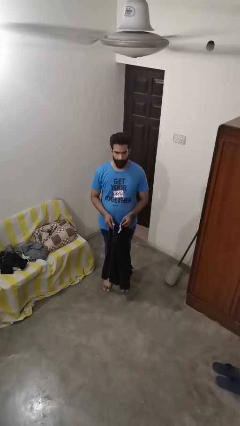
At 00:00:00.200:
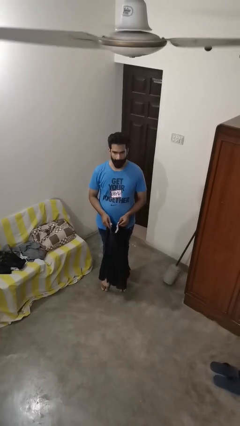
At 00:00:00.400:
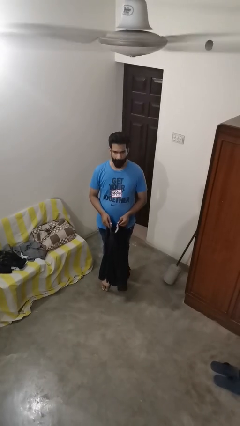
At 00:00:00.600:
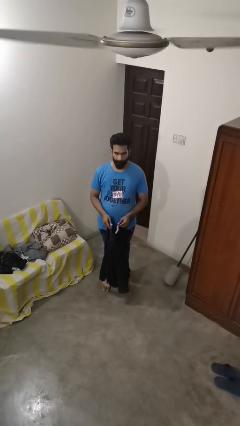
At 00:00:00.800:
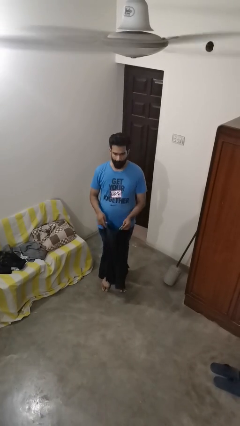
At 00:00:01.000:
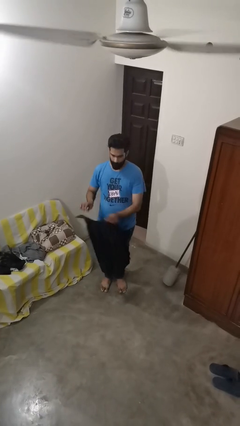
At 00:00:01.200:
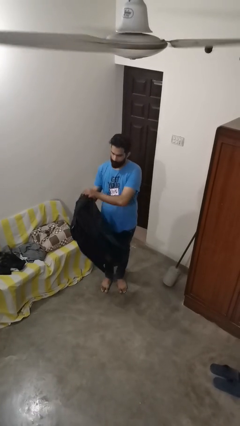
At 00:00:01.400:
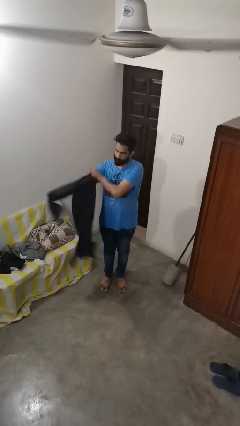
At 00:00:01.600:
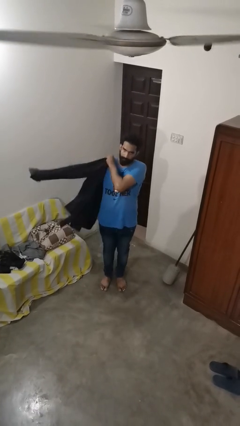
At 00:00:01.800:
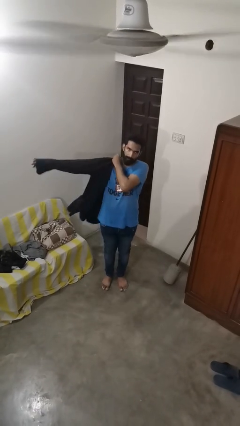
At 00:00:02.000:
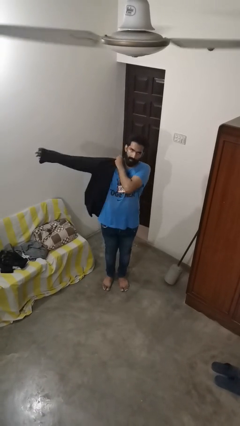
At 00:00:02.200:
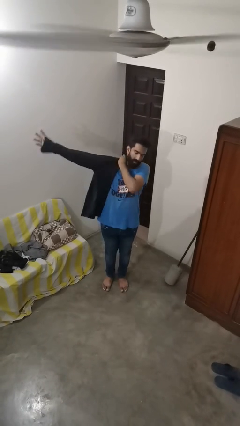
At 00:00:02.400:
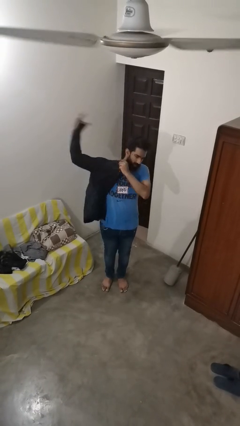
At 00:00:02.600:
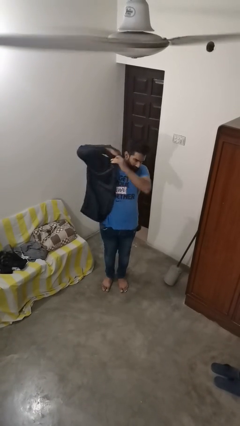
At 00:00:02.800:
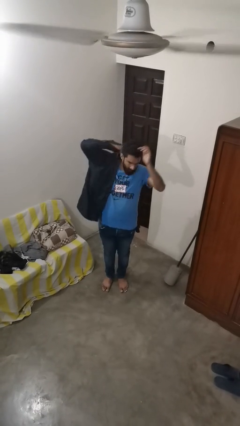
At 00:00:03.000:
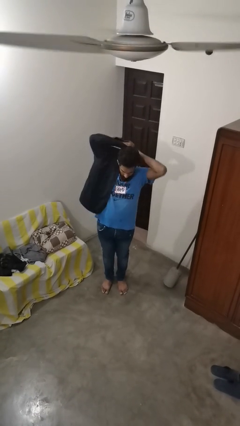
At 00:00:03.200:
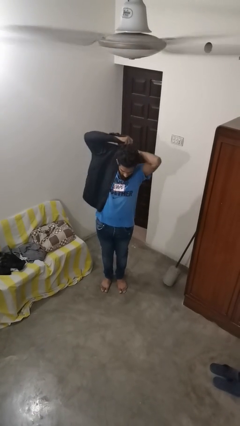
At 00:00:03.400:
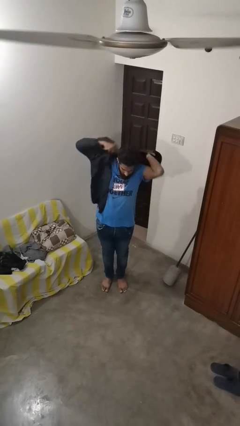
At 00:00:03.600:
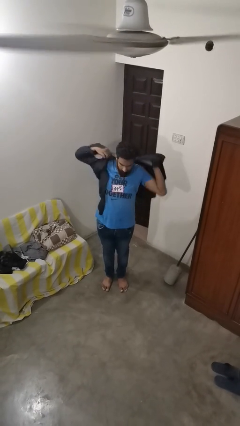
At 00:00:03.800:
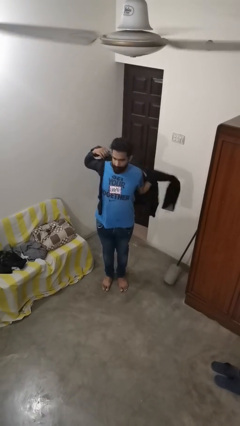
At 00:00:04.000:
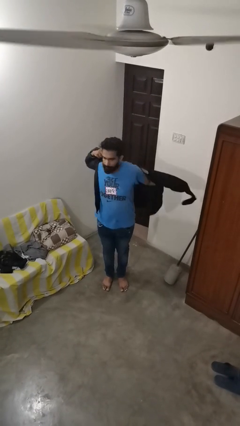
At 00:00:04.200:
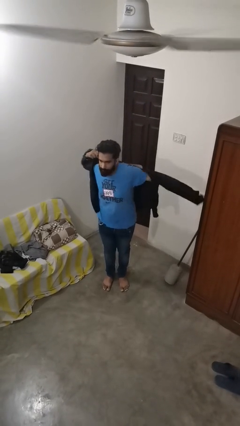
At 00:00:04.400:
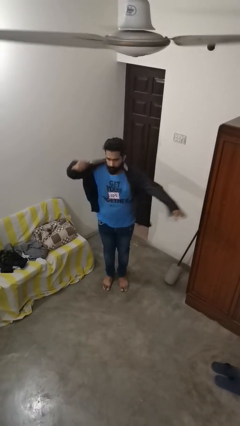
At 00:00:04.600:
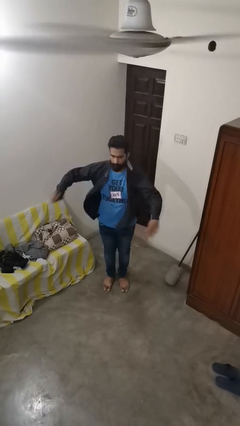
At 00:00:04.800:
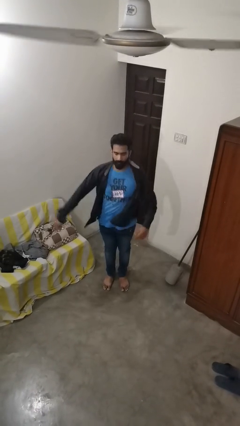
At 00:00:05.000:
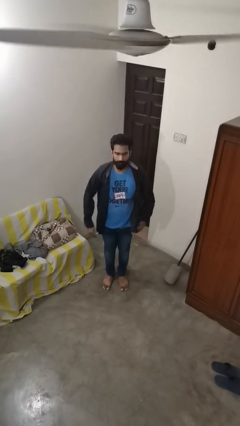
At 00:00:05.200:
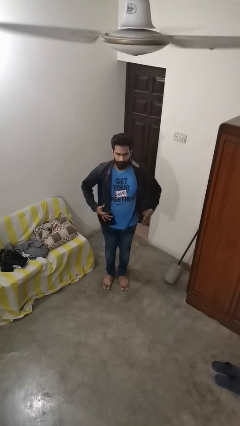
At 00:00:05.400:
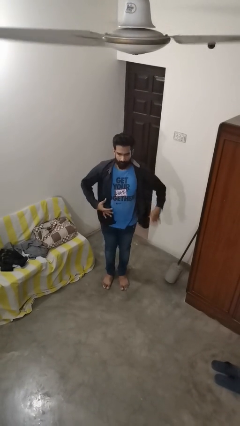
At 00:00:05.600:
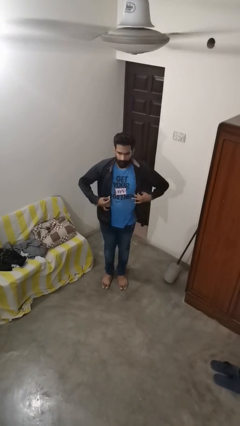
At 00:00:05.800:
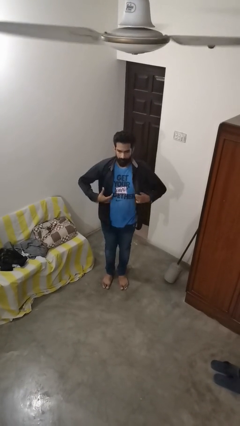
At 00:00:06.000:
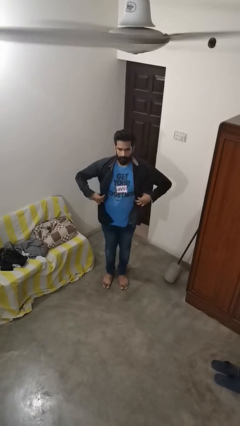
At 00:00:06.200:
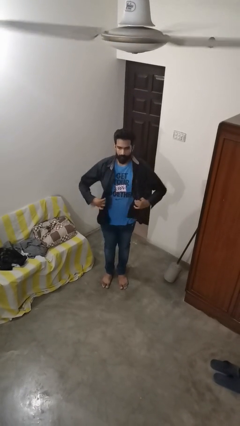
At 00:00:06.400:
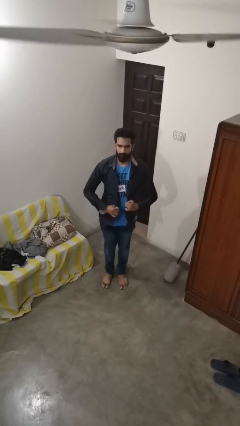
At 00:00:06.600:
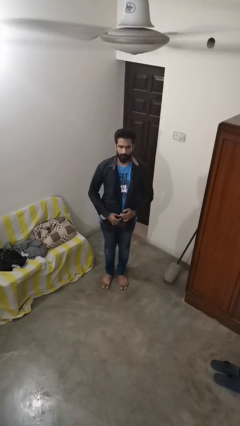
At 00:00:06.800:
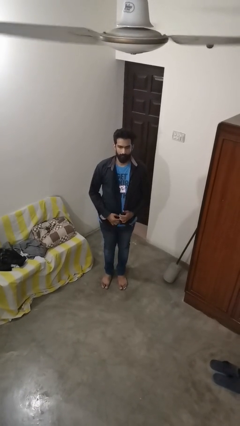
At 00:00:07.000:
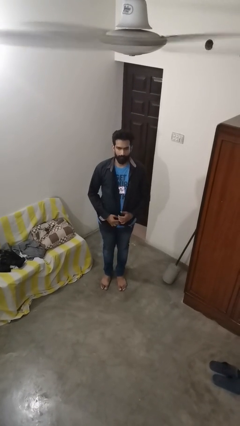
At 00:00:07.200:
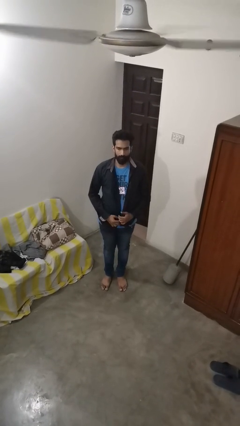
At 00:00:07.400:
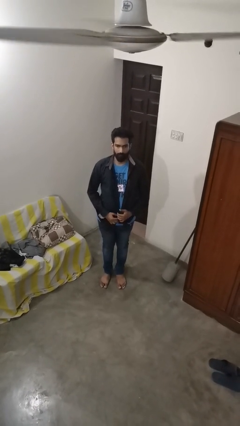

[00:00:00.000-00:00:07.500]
person puts on shirt

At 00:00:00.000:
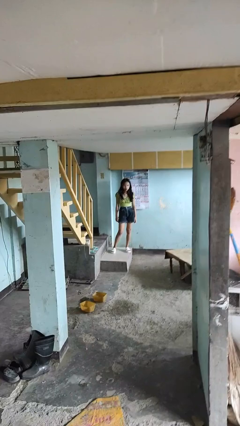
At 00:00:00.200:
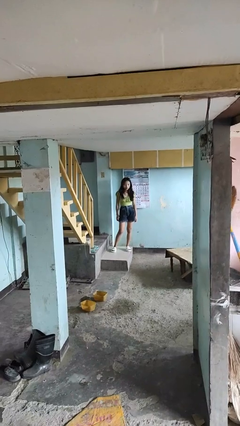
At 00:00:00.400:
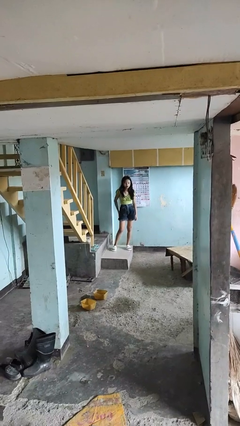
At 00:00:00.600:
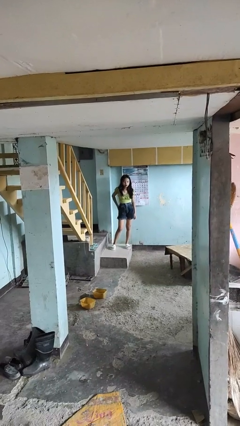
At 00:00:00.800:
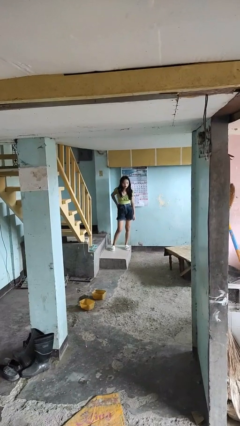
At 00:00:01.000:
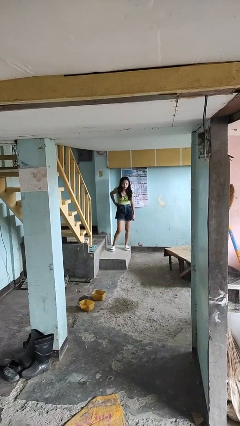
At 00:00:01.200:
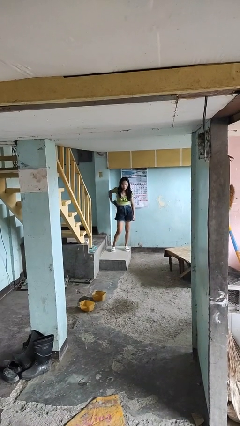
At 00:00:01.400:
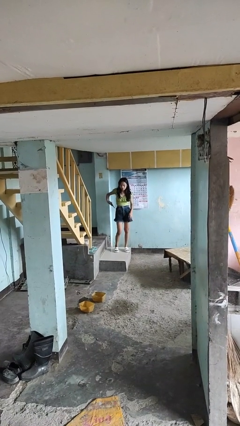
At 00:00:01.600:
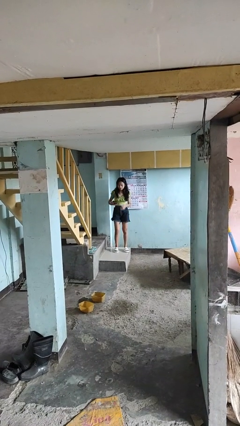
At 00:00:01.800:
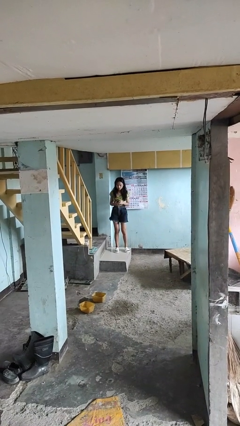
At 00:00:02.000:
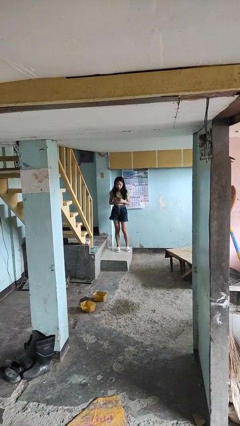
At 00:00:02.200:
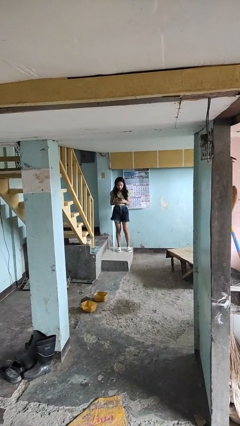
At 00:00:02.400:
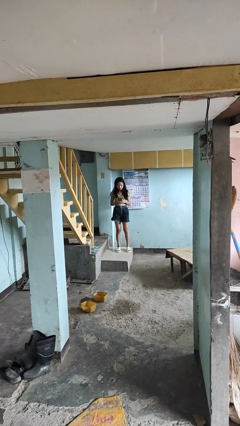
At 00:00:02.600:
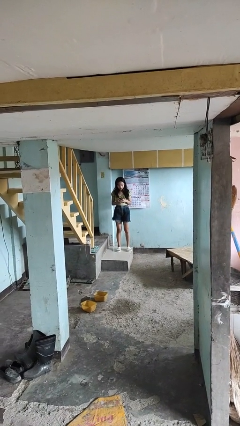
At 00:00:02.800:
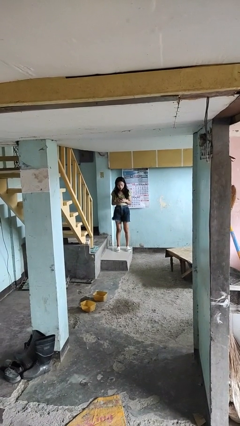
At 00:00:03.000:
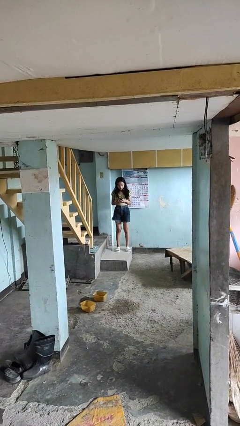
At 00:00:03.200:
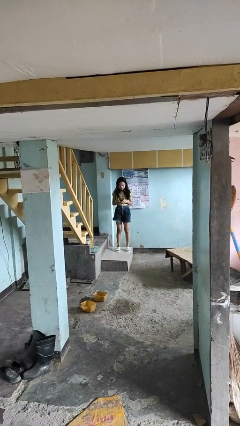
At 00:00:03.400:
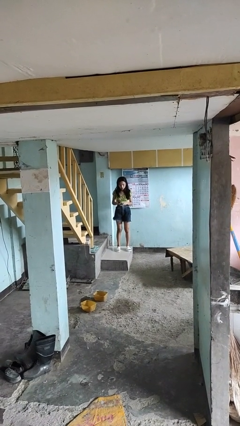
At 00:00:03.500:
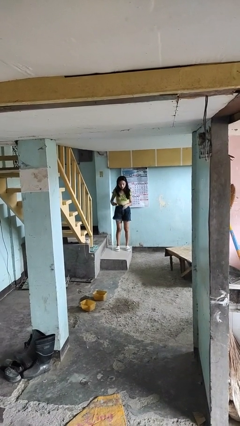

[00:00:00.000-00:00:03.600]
person takes phone from pocket

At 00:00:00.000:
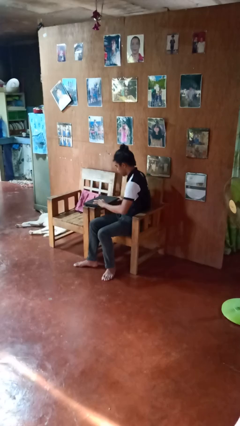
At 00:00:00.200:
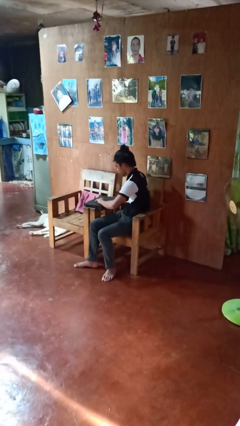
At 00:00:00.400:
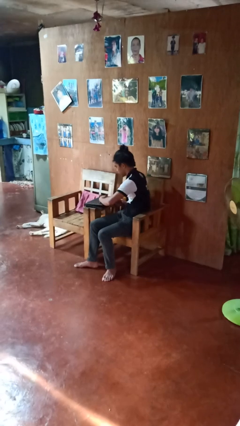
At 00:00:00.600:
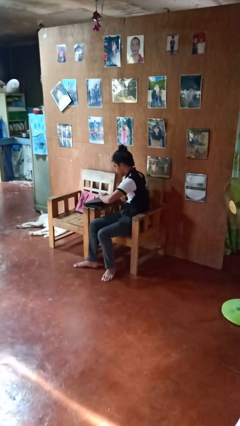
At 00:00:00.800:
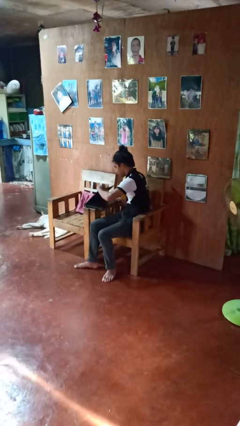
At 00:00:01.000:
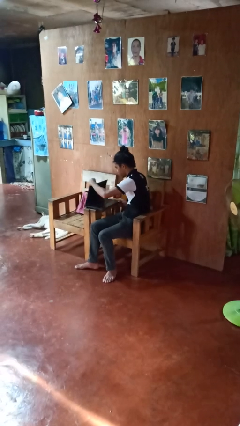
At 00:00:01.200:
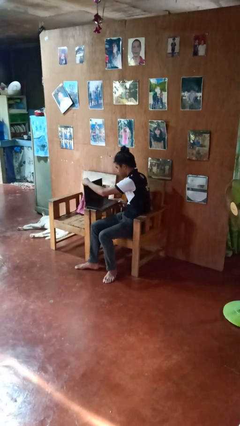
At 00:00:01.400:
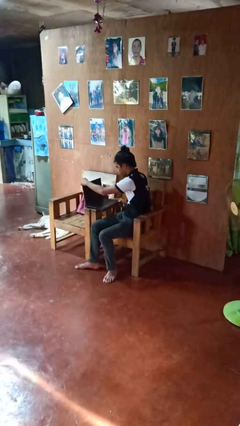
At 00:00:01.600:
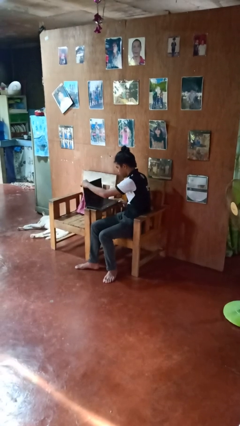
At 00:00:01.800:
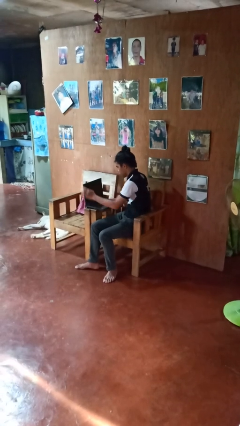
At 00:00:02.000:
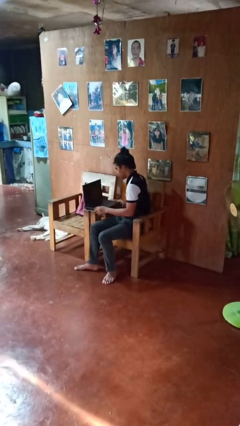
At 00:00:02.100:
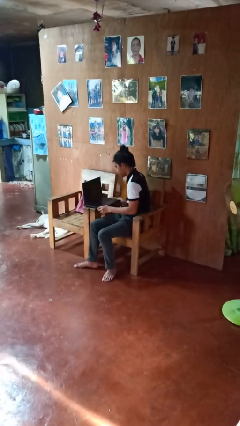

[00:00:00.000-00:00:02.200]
person opens laptop

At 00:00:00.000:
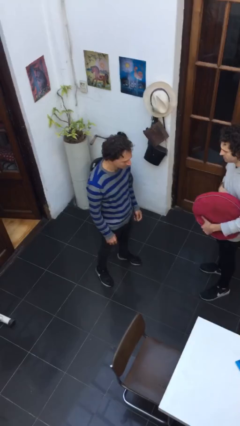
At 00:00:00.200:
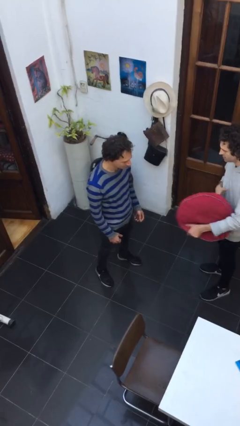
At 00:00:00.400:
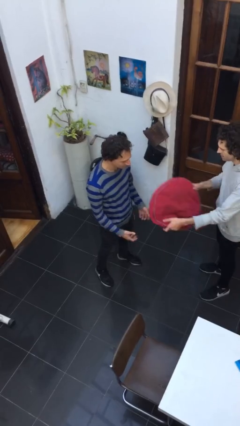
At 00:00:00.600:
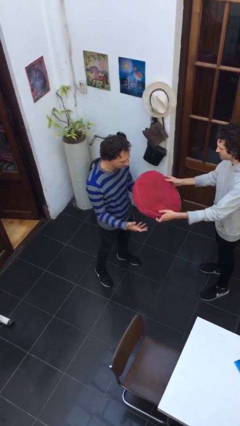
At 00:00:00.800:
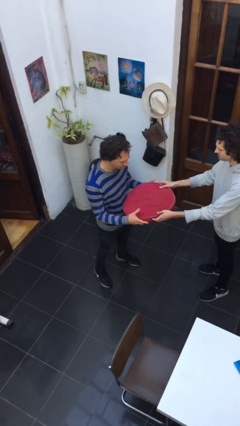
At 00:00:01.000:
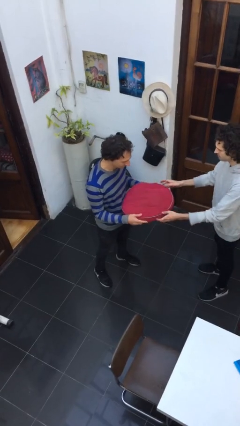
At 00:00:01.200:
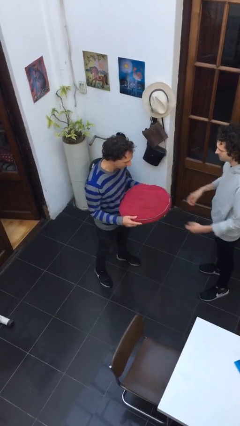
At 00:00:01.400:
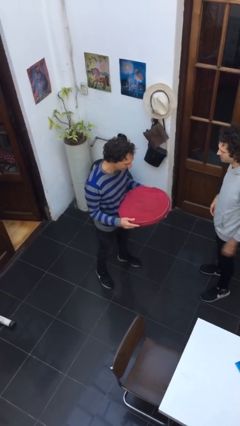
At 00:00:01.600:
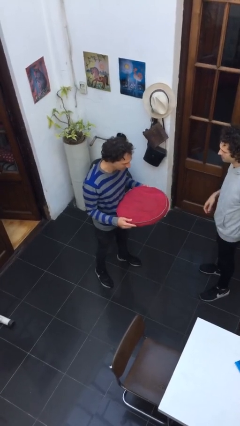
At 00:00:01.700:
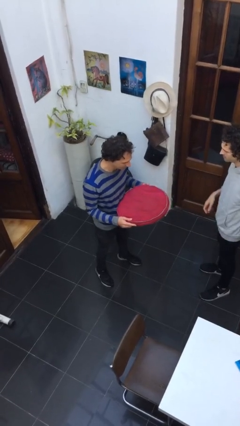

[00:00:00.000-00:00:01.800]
person transfers object to person

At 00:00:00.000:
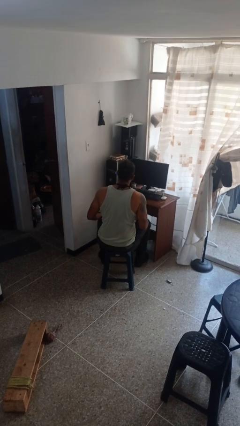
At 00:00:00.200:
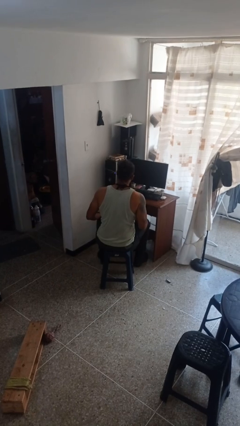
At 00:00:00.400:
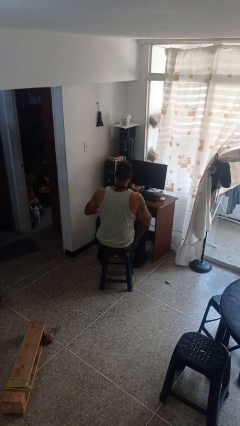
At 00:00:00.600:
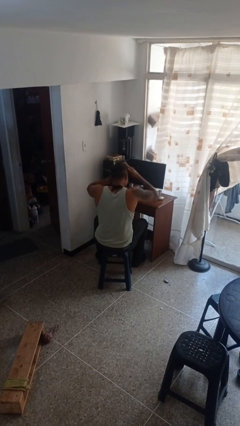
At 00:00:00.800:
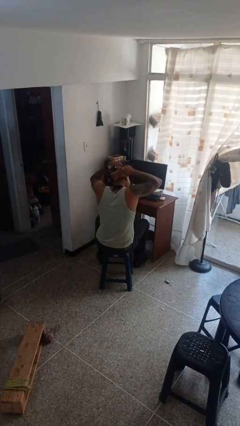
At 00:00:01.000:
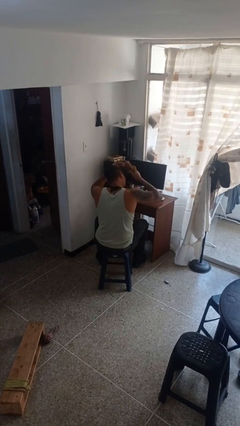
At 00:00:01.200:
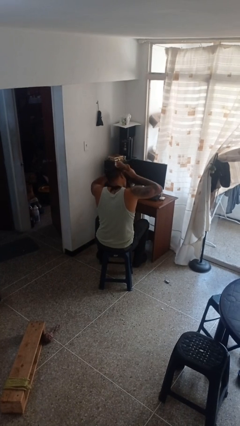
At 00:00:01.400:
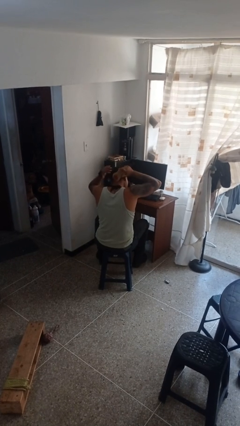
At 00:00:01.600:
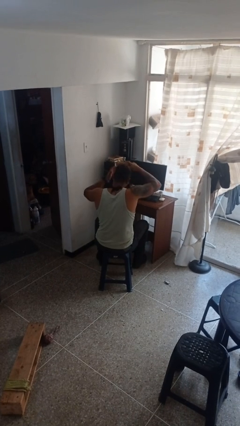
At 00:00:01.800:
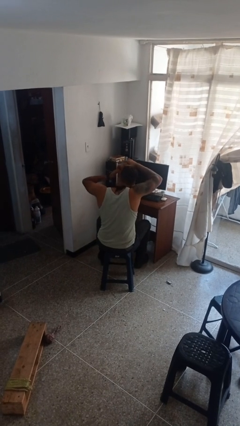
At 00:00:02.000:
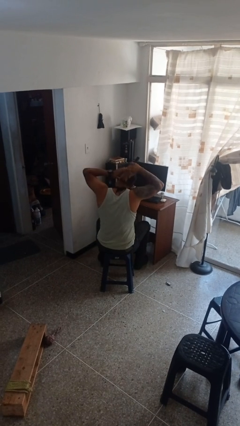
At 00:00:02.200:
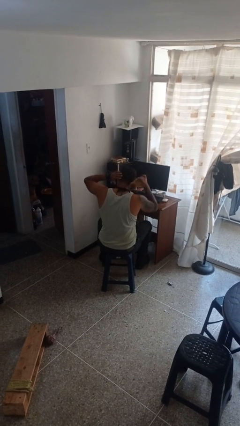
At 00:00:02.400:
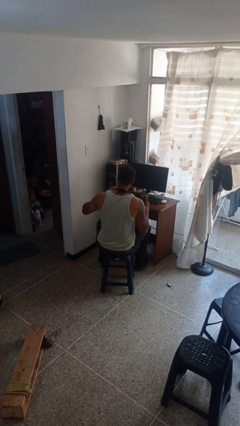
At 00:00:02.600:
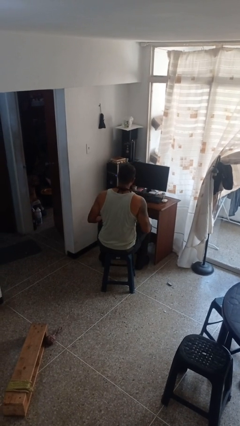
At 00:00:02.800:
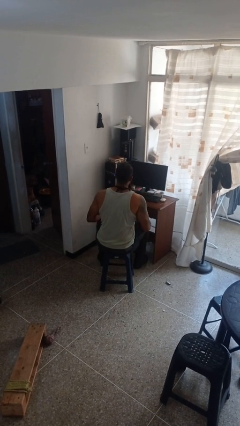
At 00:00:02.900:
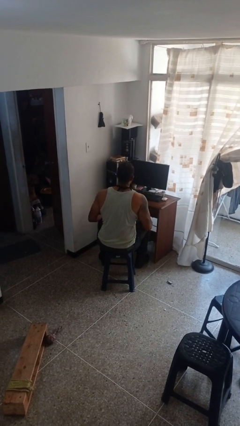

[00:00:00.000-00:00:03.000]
person brushes hair
